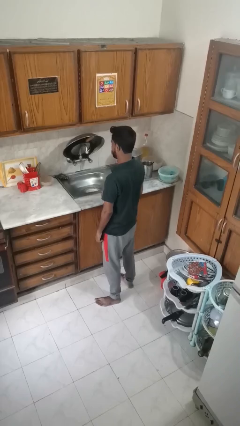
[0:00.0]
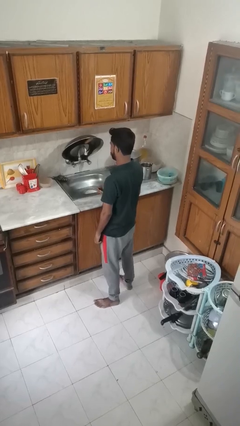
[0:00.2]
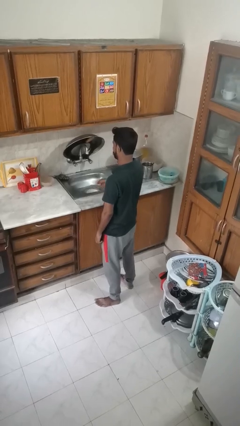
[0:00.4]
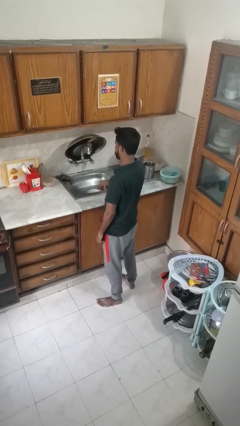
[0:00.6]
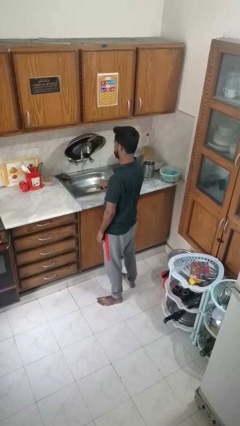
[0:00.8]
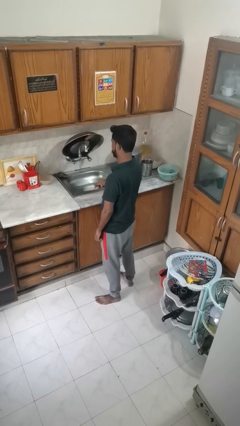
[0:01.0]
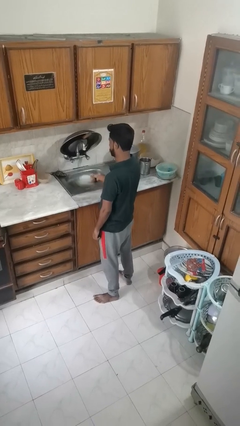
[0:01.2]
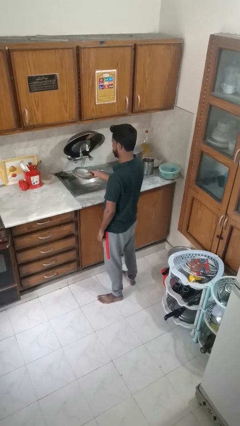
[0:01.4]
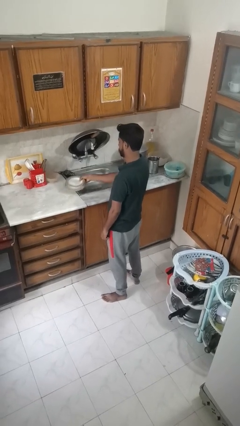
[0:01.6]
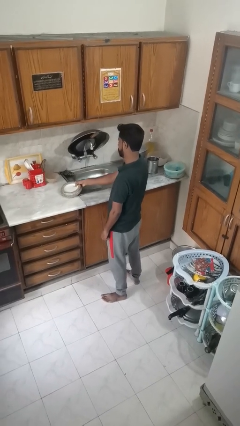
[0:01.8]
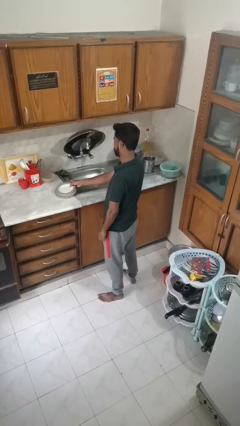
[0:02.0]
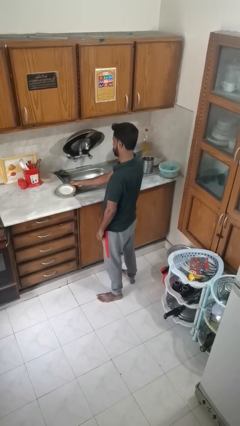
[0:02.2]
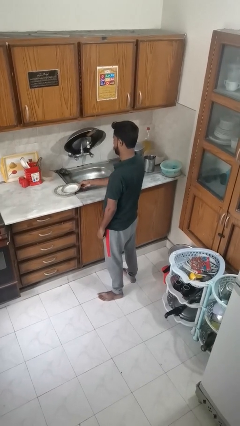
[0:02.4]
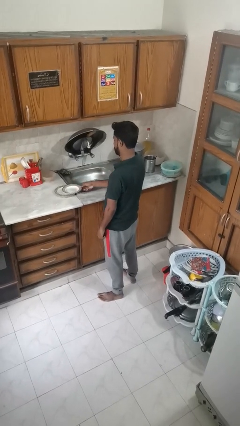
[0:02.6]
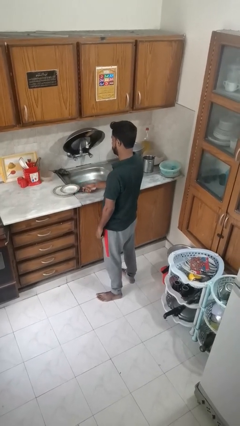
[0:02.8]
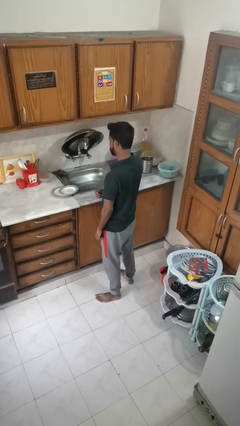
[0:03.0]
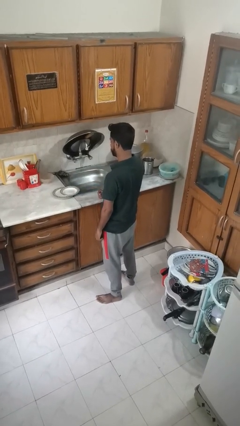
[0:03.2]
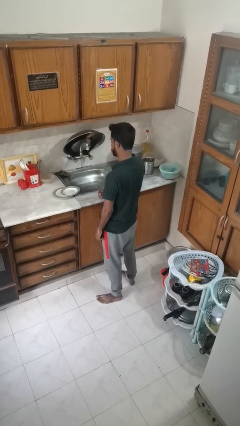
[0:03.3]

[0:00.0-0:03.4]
person closes dishwasher

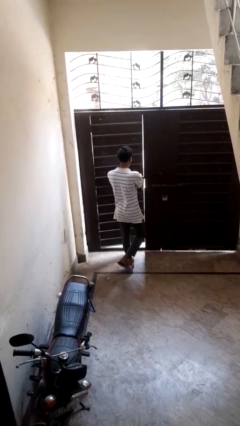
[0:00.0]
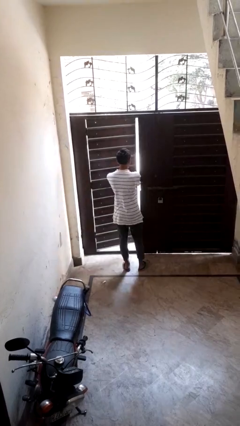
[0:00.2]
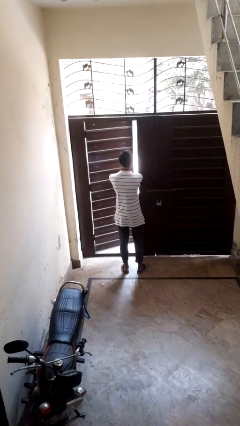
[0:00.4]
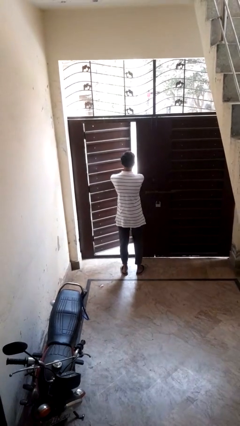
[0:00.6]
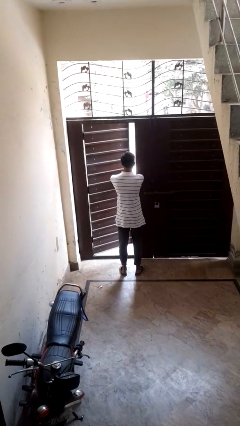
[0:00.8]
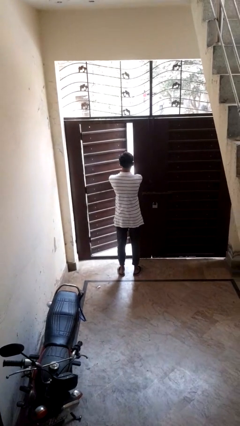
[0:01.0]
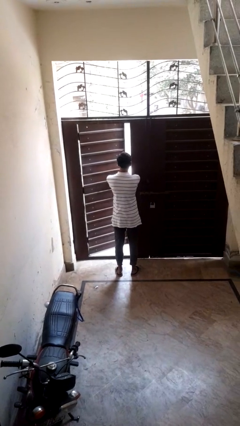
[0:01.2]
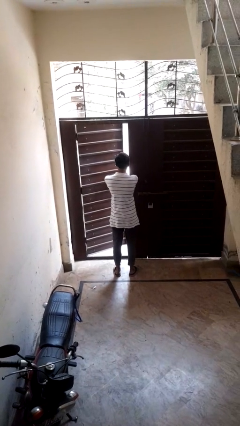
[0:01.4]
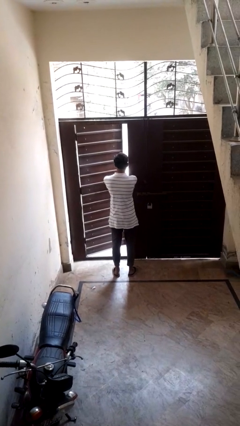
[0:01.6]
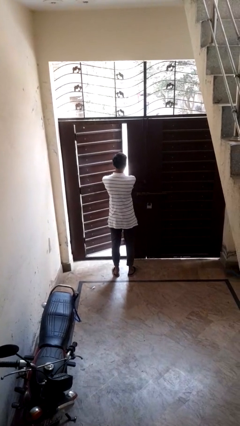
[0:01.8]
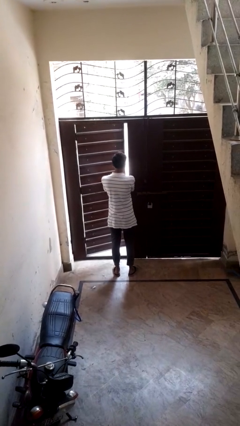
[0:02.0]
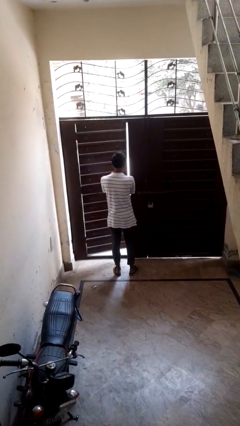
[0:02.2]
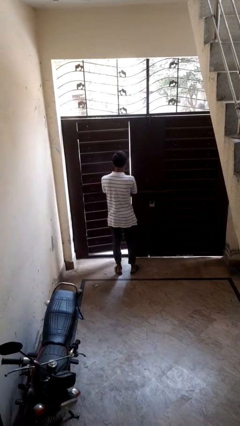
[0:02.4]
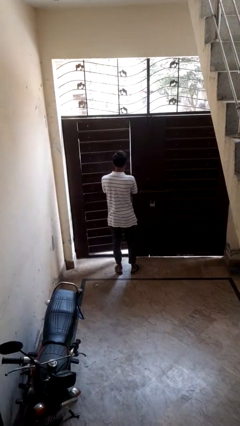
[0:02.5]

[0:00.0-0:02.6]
person opens facility door

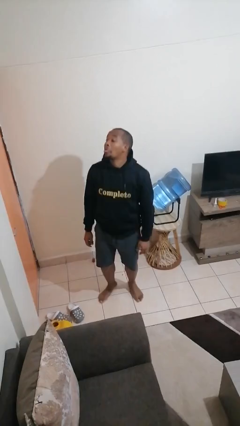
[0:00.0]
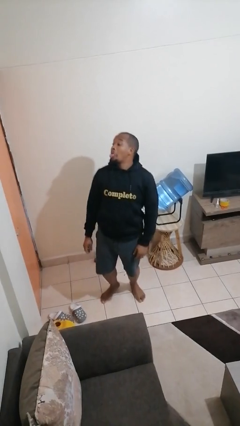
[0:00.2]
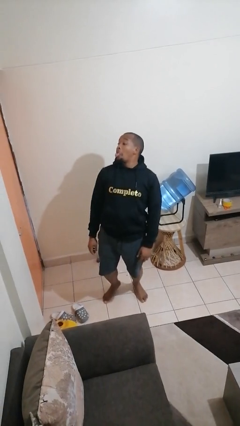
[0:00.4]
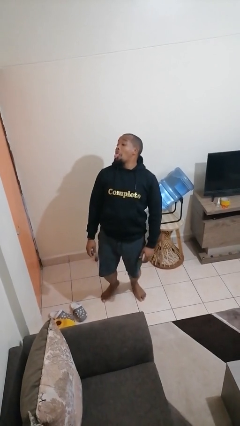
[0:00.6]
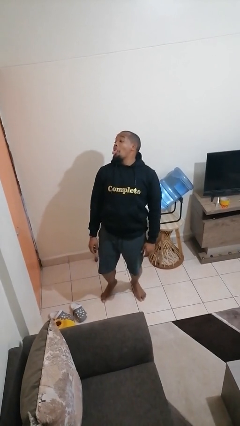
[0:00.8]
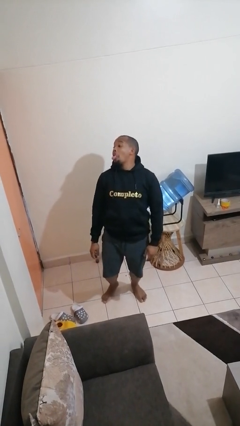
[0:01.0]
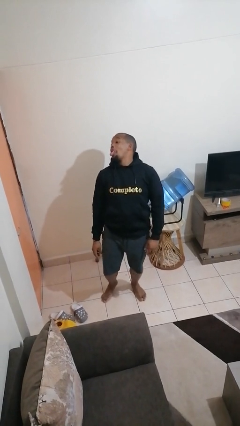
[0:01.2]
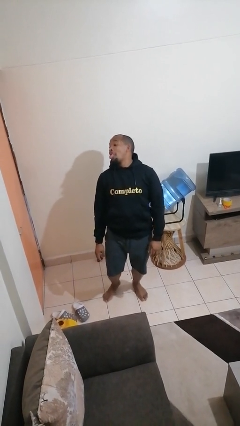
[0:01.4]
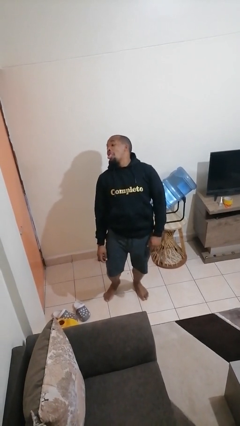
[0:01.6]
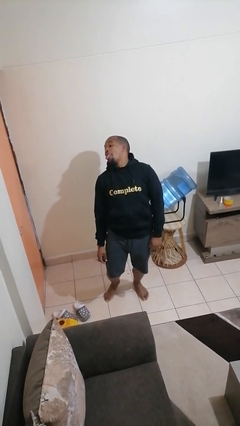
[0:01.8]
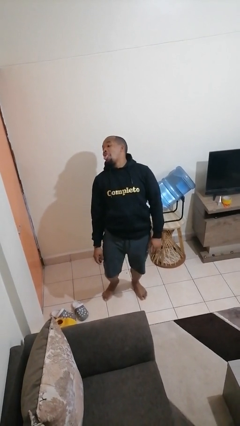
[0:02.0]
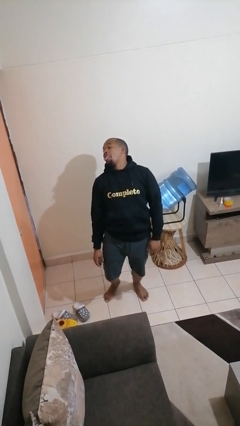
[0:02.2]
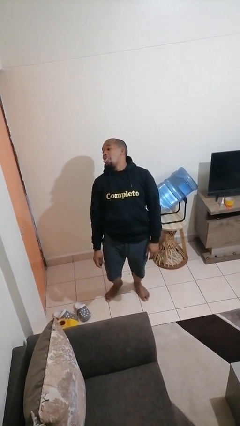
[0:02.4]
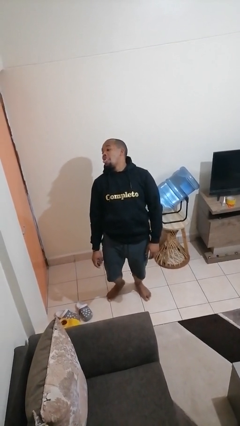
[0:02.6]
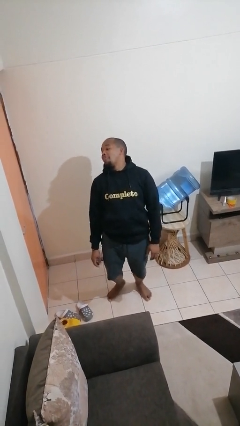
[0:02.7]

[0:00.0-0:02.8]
person sticks out tongue

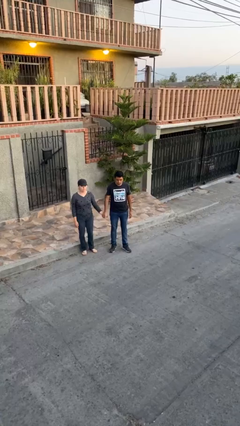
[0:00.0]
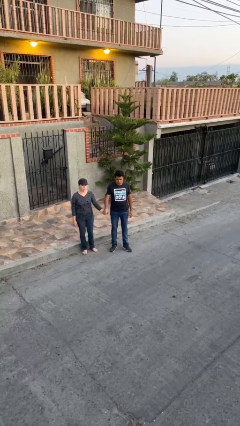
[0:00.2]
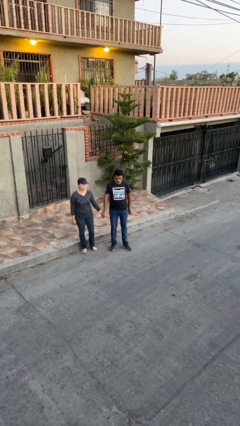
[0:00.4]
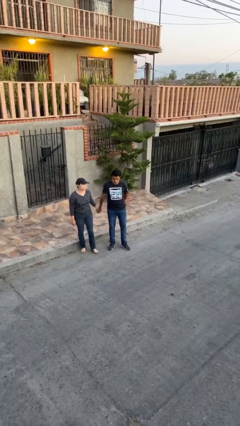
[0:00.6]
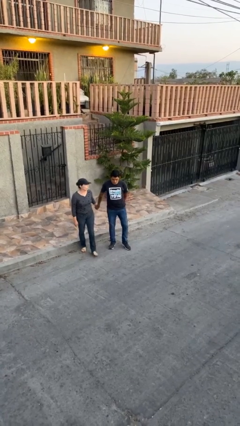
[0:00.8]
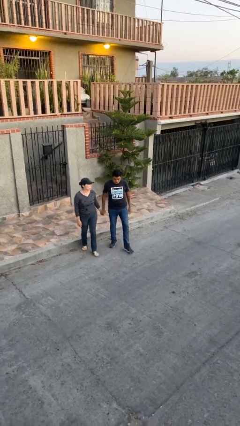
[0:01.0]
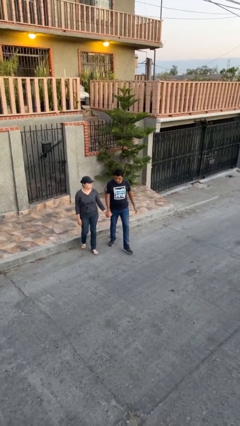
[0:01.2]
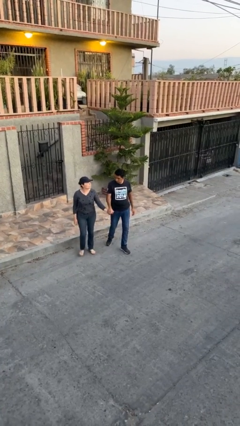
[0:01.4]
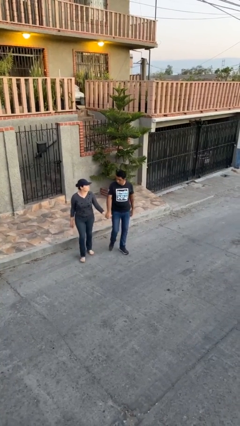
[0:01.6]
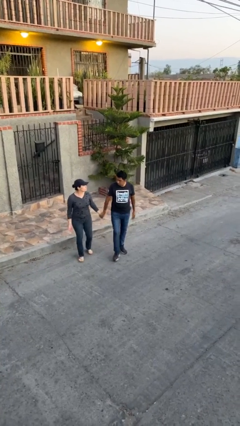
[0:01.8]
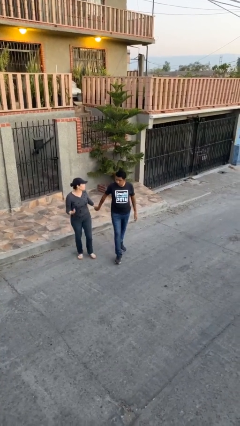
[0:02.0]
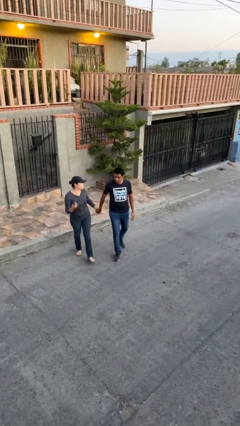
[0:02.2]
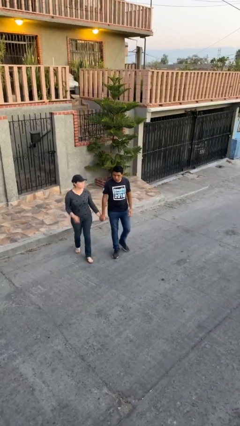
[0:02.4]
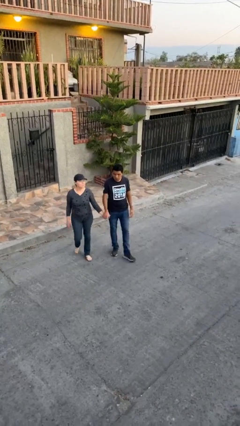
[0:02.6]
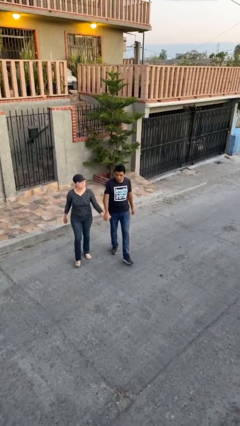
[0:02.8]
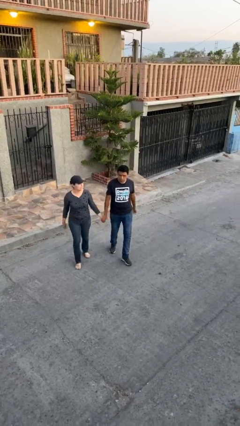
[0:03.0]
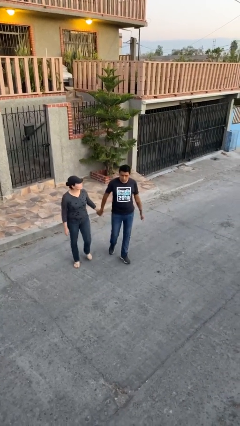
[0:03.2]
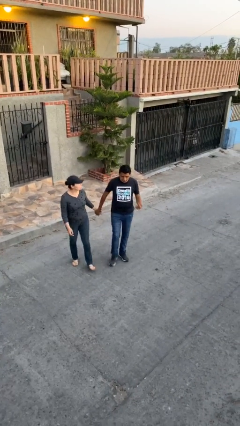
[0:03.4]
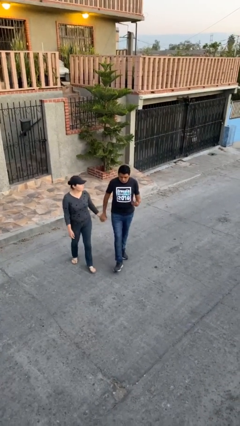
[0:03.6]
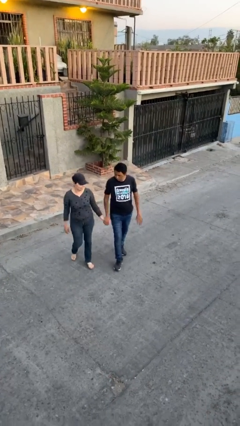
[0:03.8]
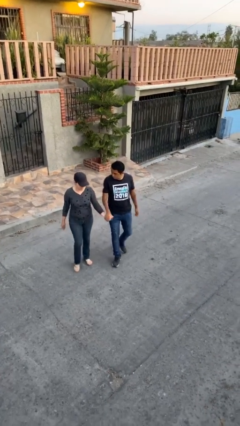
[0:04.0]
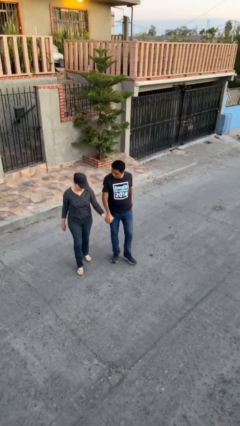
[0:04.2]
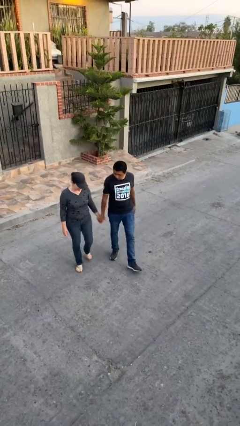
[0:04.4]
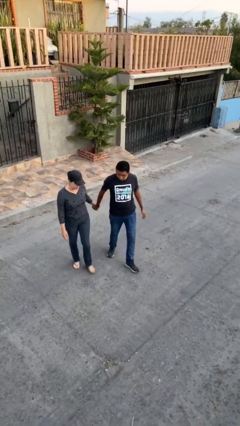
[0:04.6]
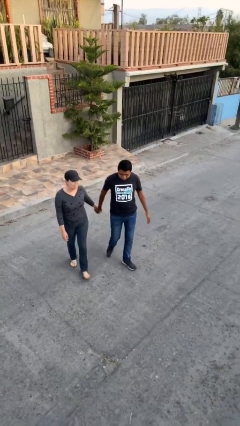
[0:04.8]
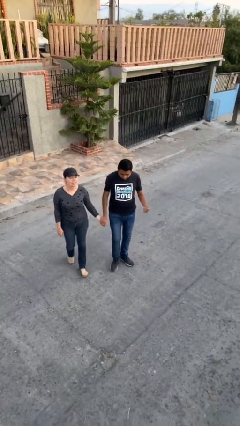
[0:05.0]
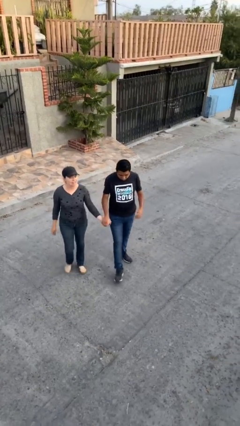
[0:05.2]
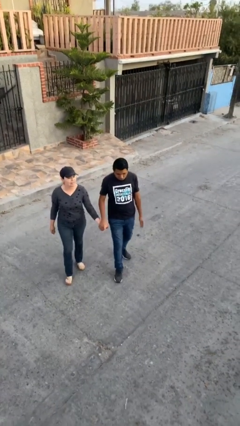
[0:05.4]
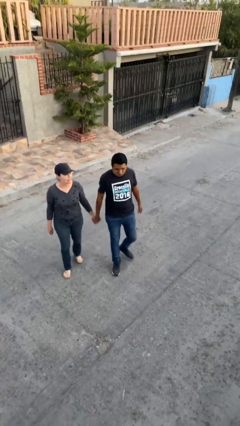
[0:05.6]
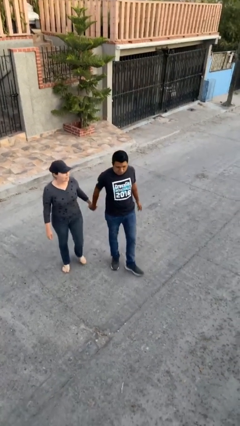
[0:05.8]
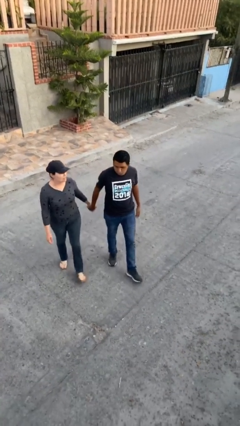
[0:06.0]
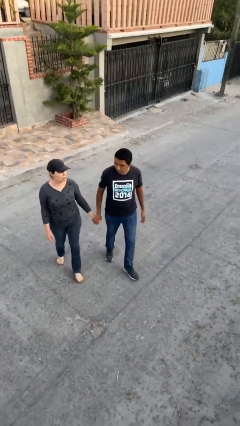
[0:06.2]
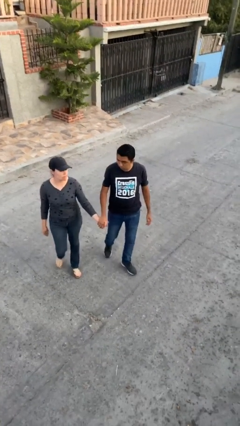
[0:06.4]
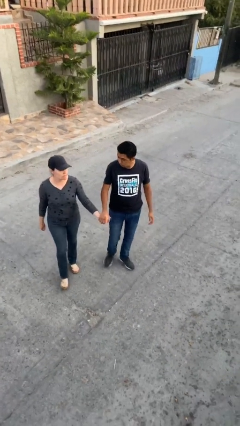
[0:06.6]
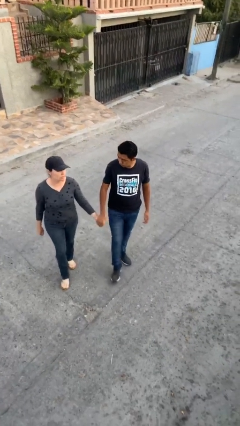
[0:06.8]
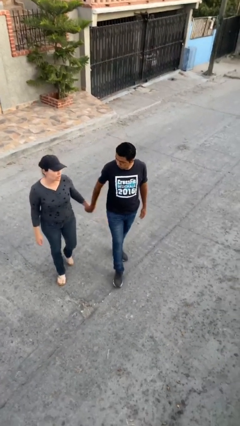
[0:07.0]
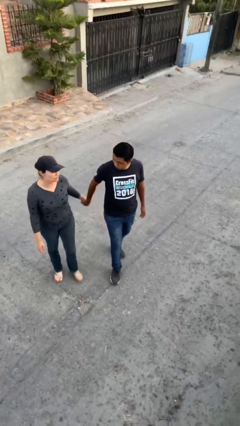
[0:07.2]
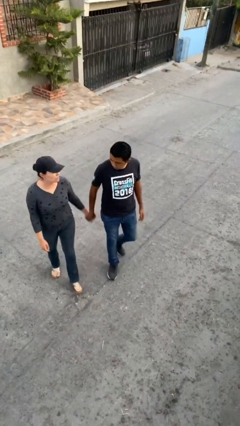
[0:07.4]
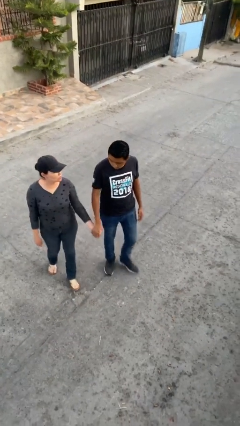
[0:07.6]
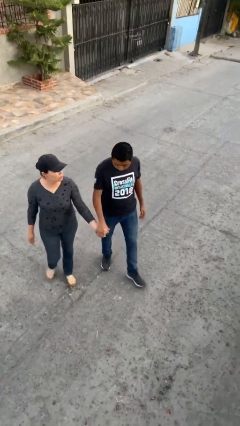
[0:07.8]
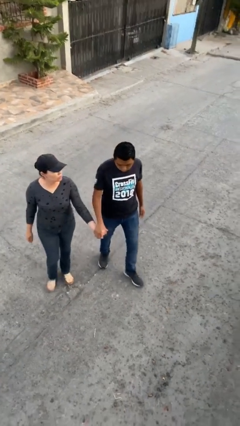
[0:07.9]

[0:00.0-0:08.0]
person holds hand

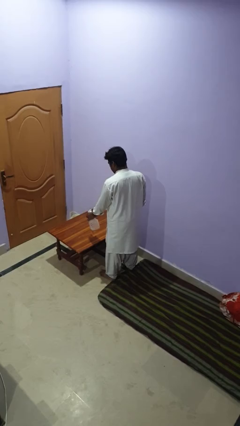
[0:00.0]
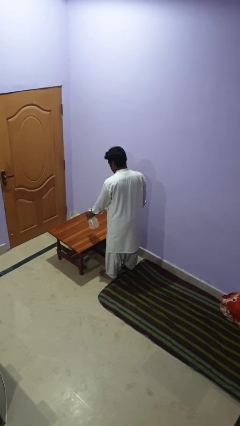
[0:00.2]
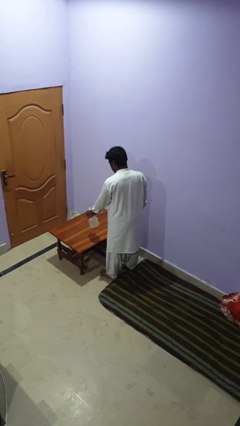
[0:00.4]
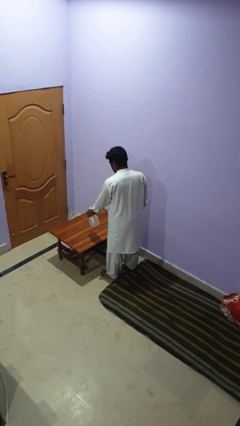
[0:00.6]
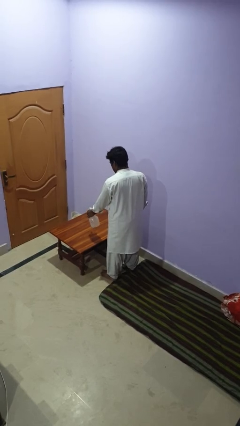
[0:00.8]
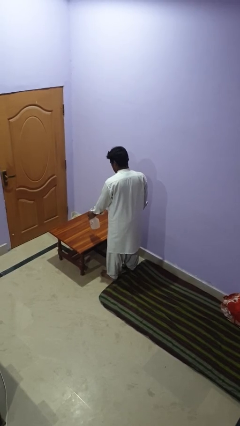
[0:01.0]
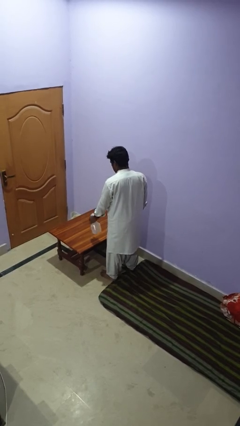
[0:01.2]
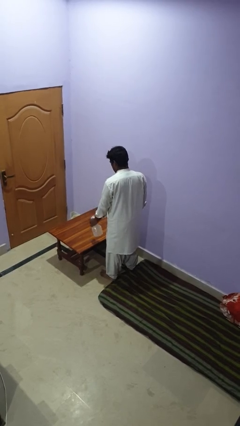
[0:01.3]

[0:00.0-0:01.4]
person sprays from bottle
